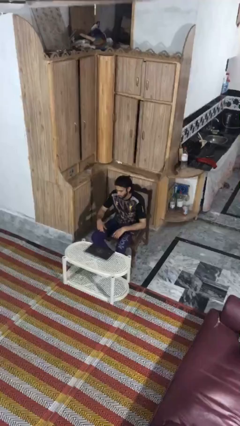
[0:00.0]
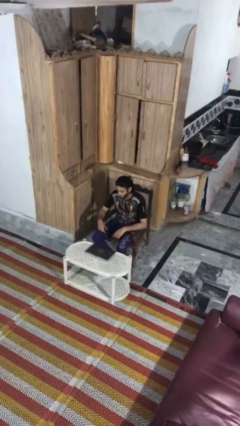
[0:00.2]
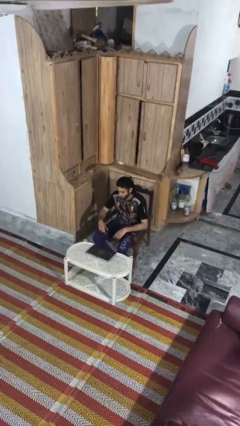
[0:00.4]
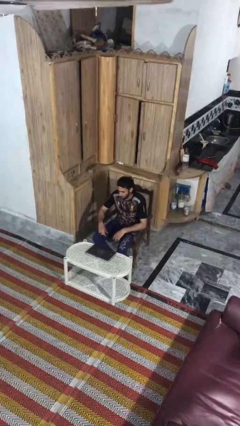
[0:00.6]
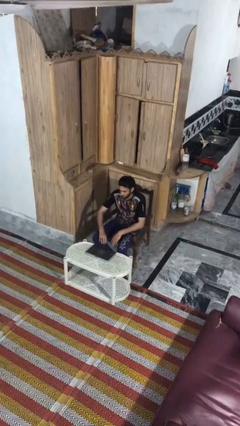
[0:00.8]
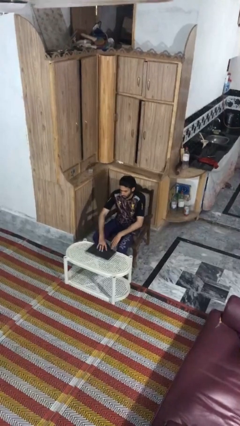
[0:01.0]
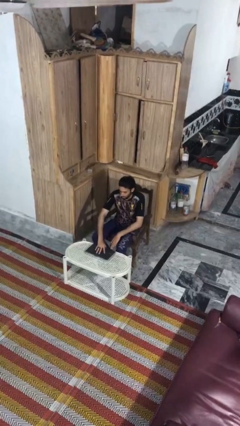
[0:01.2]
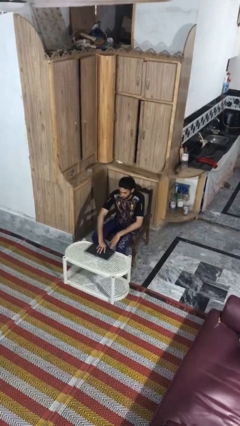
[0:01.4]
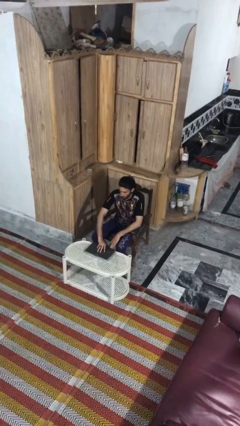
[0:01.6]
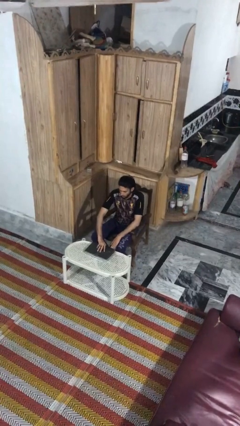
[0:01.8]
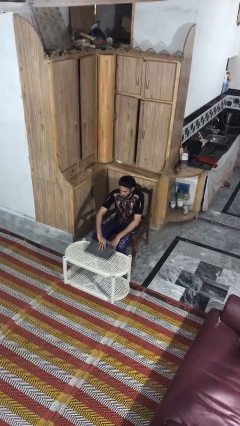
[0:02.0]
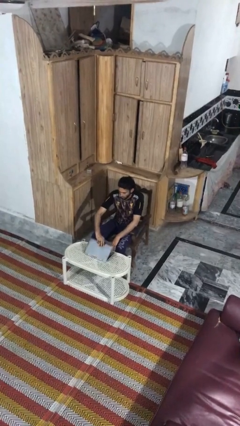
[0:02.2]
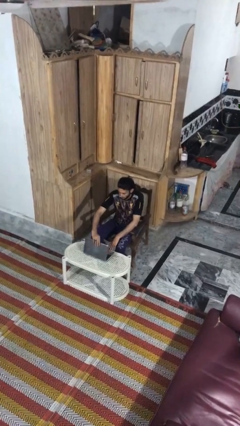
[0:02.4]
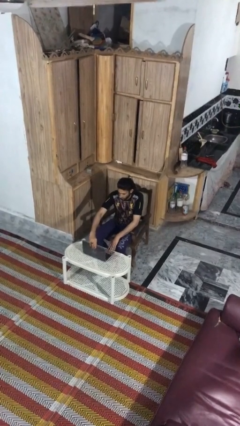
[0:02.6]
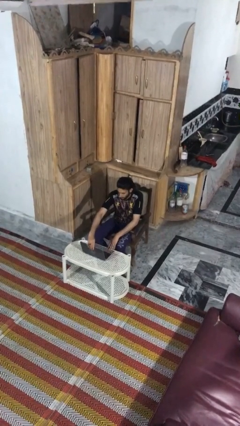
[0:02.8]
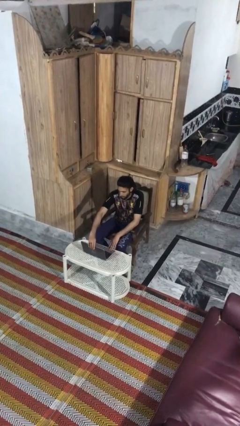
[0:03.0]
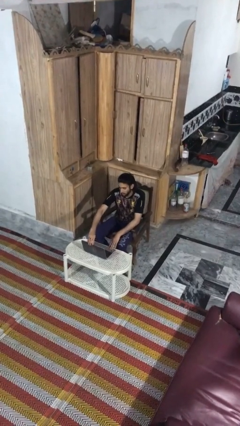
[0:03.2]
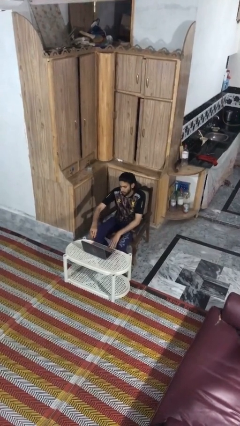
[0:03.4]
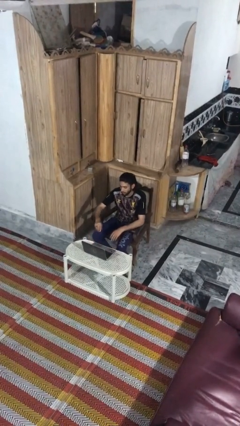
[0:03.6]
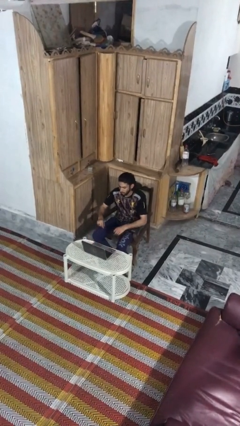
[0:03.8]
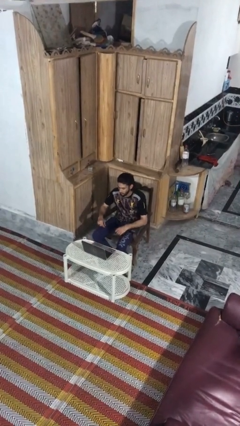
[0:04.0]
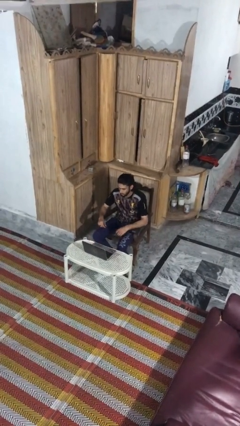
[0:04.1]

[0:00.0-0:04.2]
person opens laptop

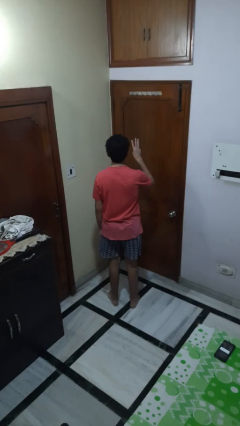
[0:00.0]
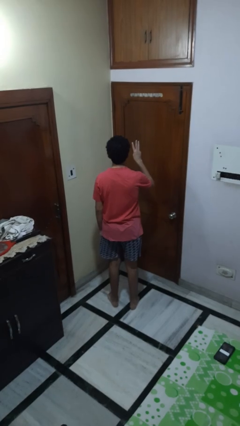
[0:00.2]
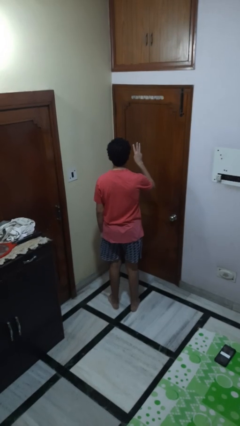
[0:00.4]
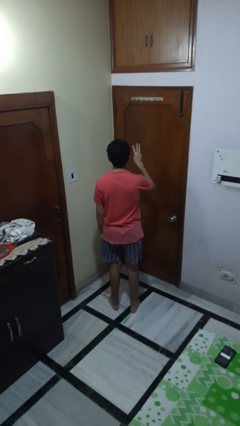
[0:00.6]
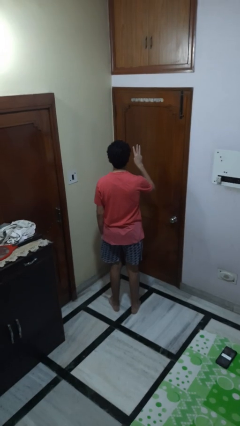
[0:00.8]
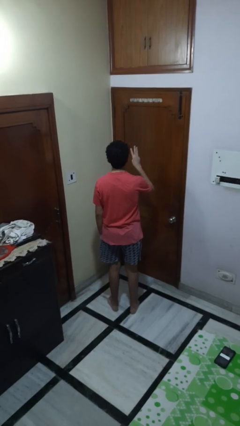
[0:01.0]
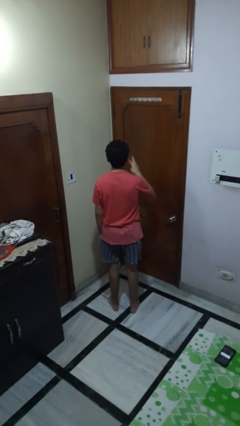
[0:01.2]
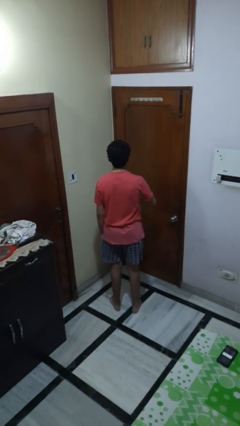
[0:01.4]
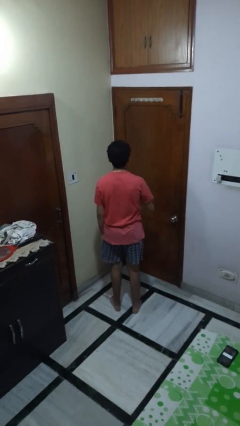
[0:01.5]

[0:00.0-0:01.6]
person gestures number three

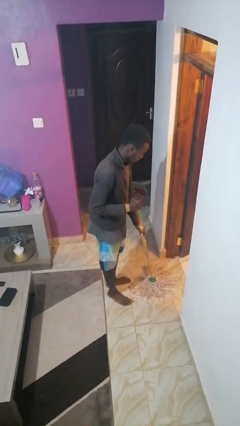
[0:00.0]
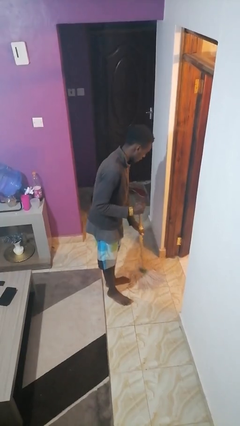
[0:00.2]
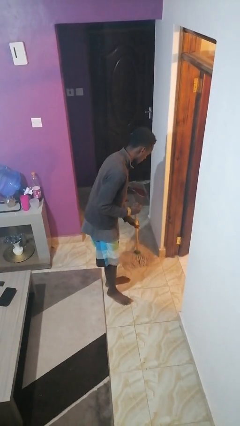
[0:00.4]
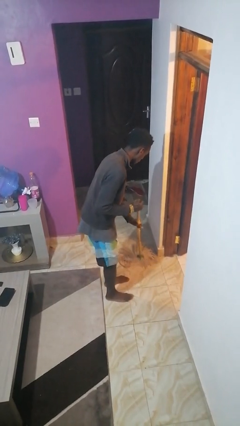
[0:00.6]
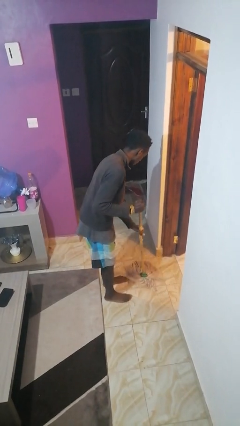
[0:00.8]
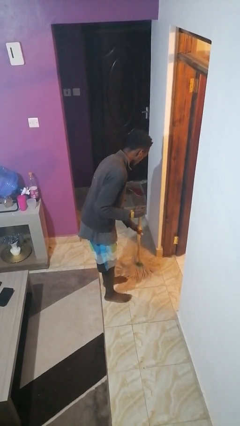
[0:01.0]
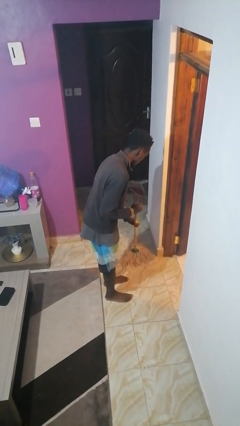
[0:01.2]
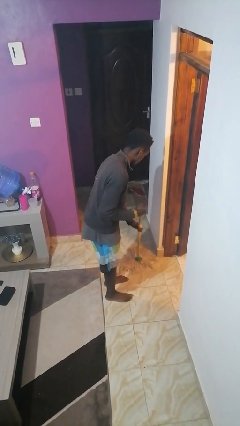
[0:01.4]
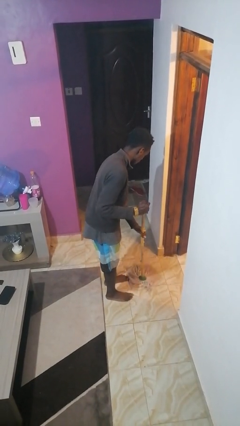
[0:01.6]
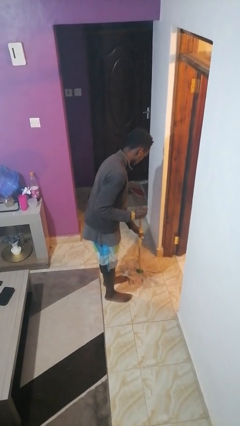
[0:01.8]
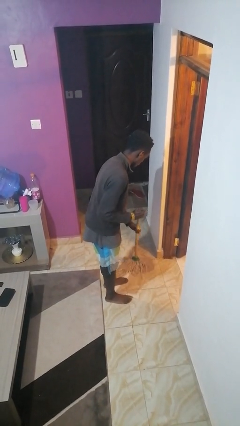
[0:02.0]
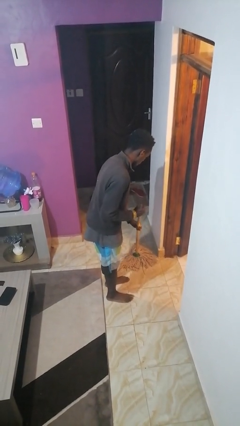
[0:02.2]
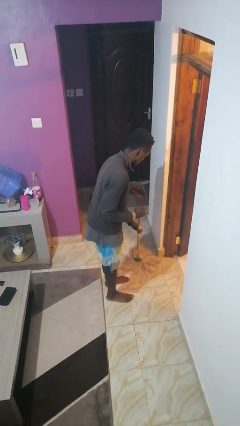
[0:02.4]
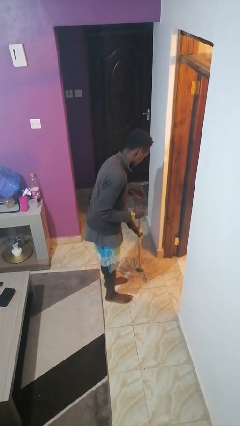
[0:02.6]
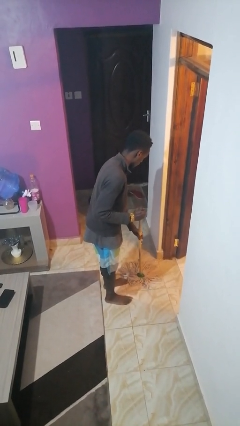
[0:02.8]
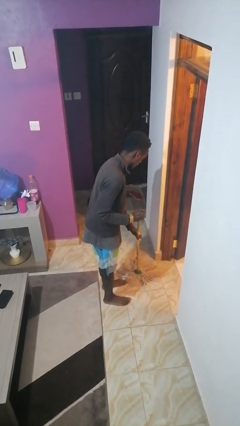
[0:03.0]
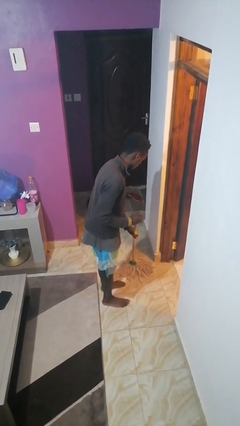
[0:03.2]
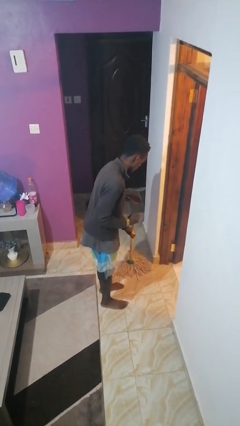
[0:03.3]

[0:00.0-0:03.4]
person mops

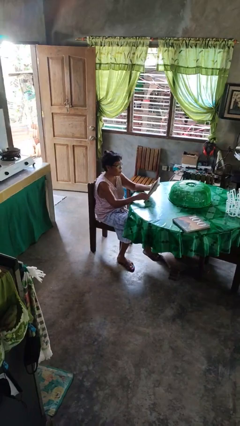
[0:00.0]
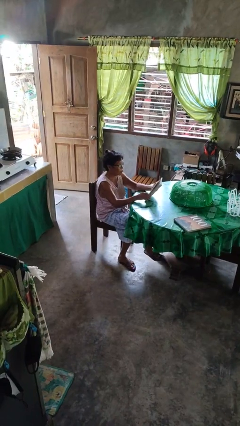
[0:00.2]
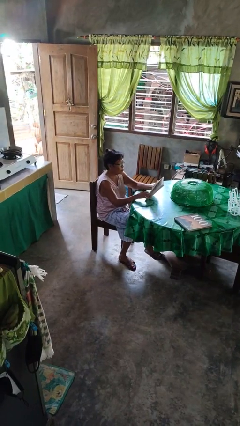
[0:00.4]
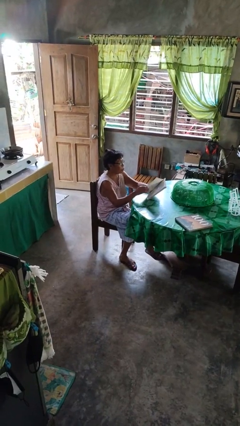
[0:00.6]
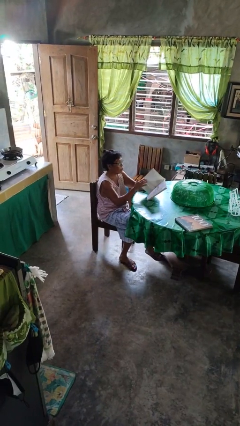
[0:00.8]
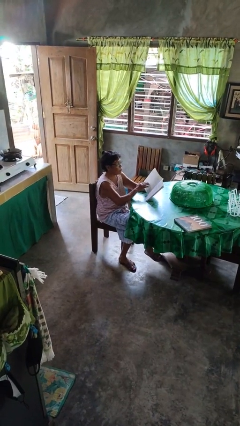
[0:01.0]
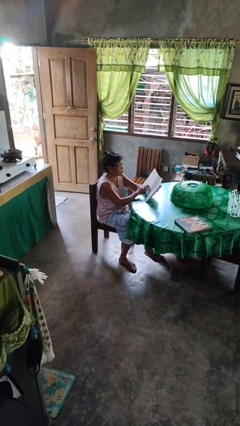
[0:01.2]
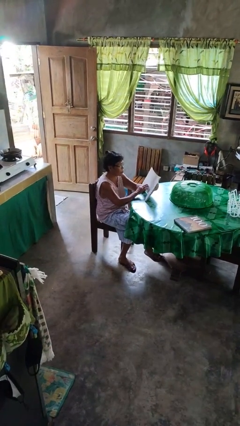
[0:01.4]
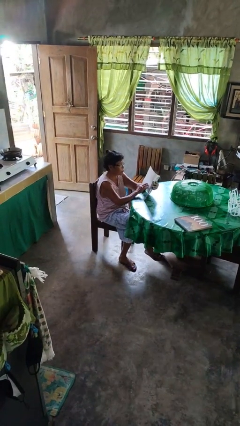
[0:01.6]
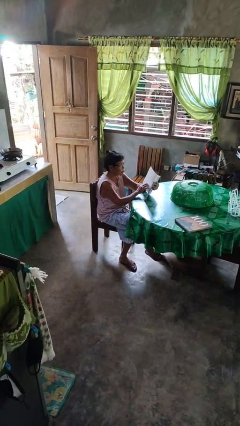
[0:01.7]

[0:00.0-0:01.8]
person reads magazine

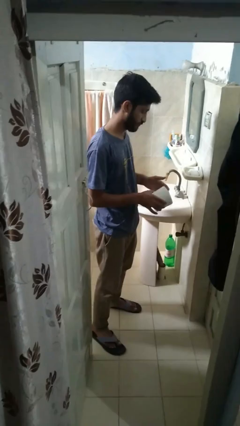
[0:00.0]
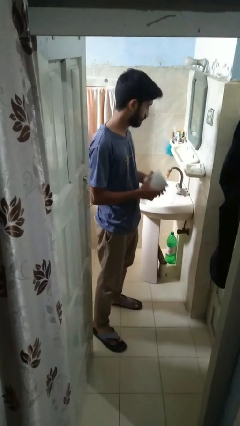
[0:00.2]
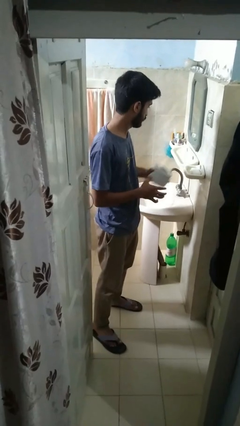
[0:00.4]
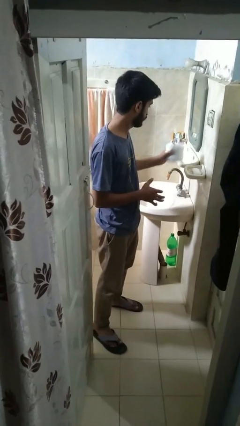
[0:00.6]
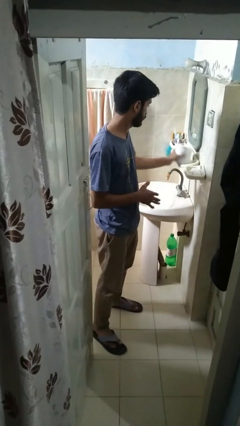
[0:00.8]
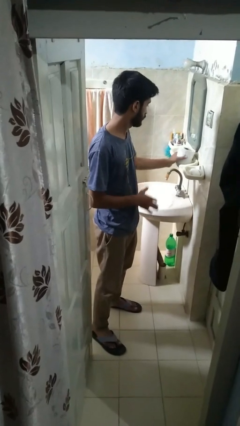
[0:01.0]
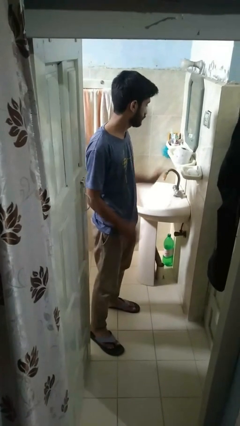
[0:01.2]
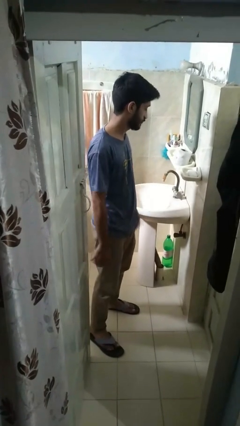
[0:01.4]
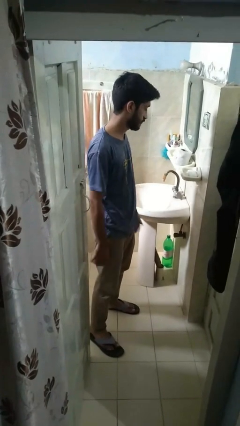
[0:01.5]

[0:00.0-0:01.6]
person puts down object on countertop

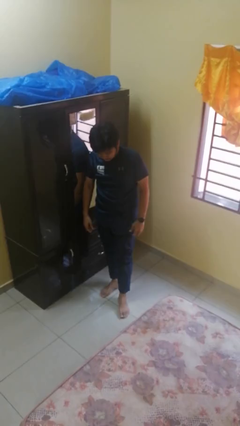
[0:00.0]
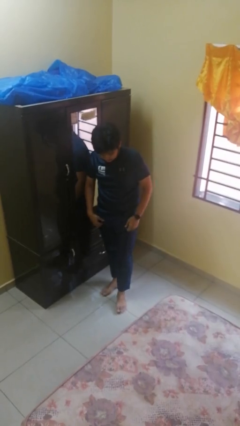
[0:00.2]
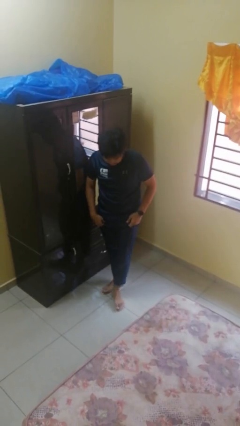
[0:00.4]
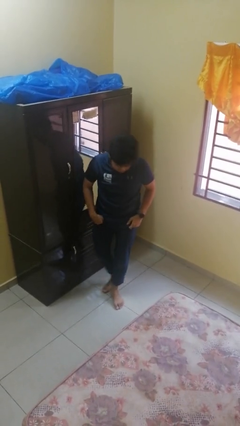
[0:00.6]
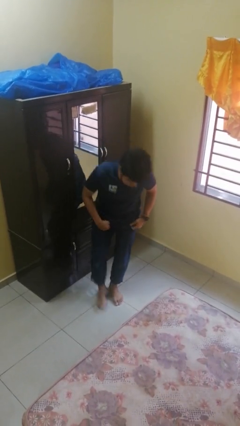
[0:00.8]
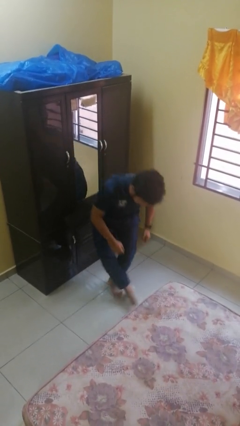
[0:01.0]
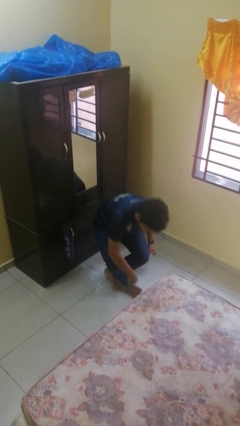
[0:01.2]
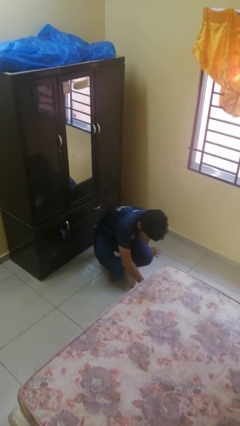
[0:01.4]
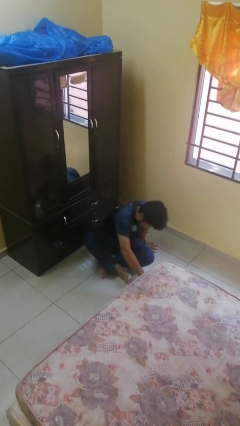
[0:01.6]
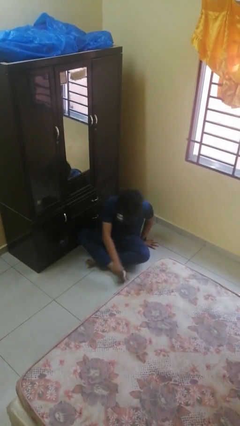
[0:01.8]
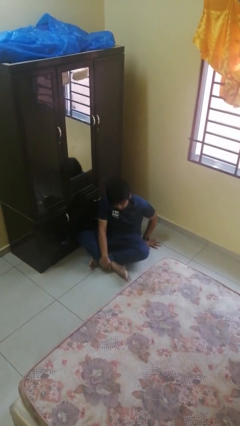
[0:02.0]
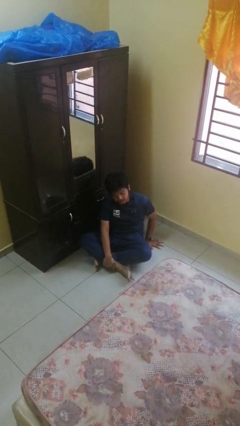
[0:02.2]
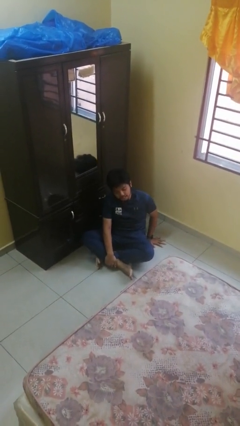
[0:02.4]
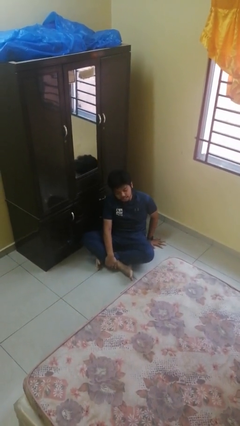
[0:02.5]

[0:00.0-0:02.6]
person sits crisscross

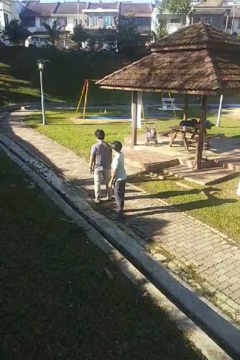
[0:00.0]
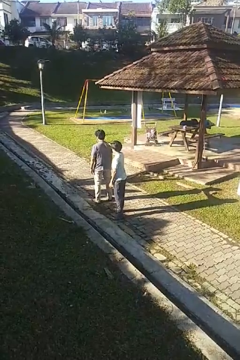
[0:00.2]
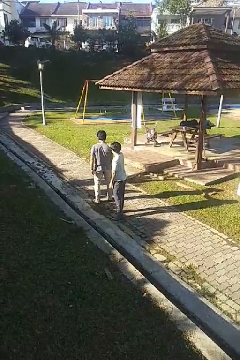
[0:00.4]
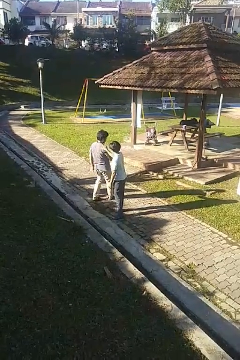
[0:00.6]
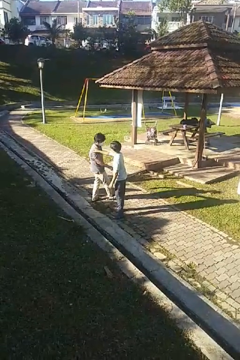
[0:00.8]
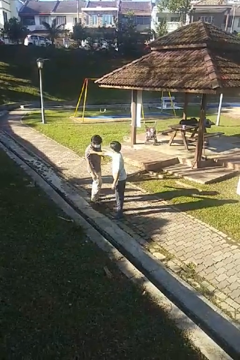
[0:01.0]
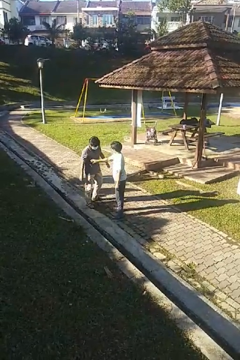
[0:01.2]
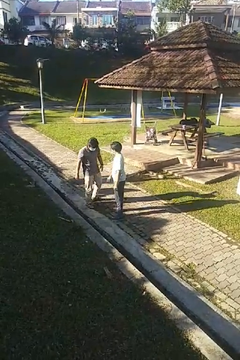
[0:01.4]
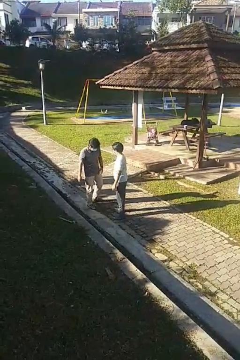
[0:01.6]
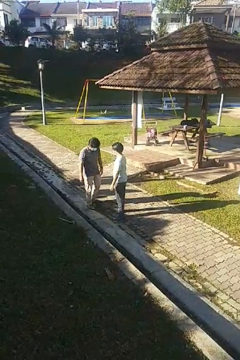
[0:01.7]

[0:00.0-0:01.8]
person spins person around

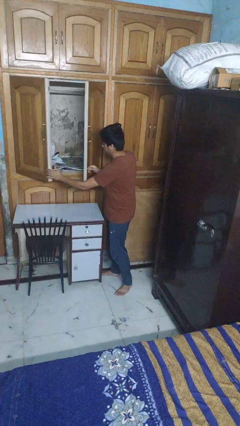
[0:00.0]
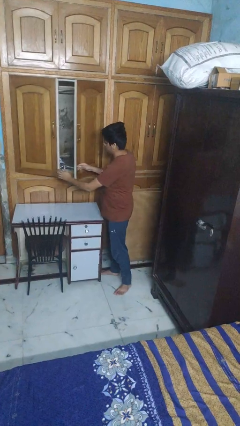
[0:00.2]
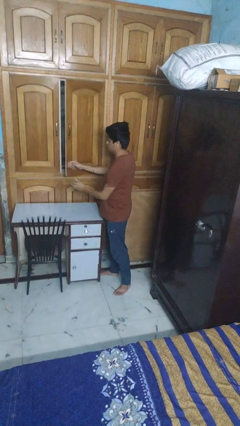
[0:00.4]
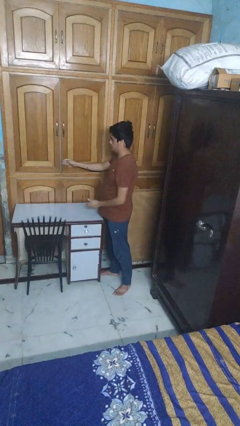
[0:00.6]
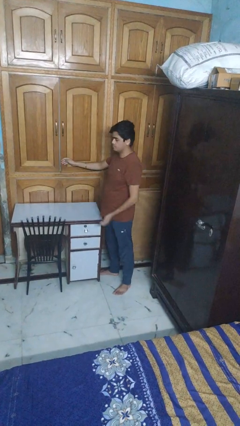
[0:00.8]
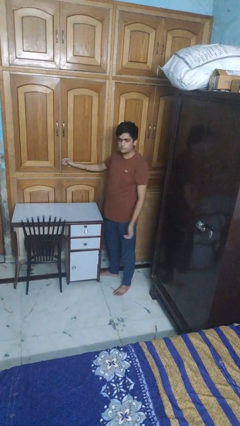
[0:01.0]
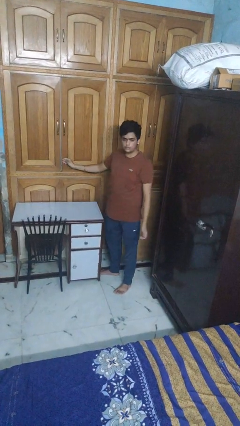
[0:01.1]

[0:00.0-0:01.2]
person closes closet door
